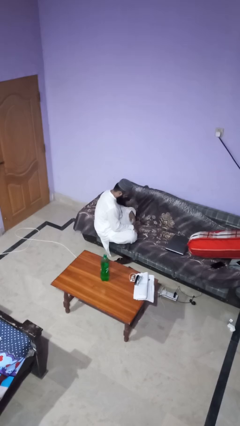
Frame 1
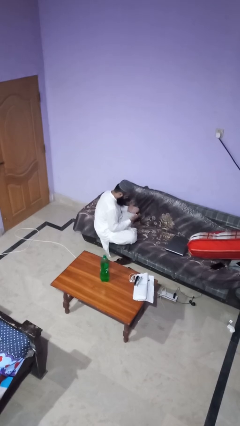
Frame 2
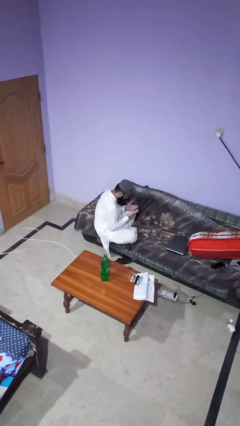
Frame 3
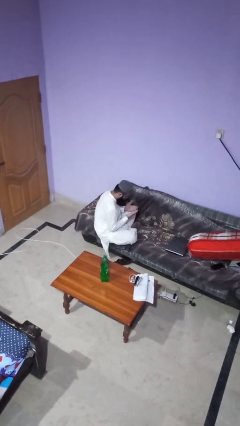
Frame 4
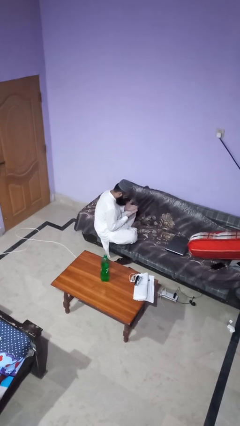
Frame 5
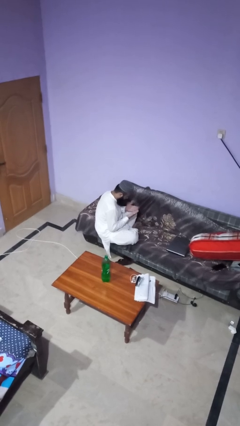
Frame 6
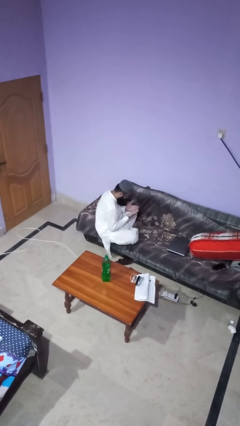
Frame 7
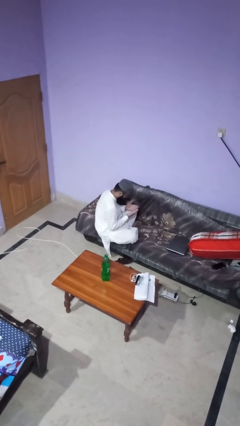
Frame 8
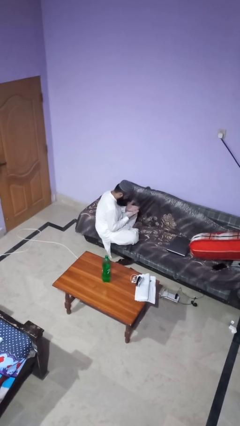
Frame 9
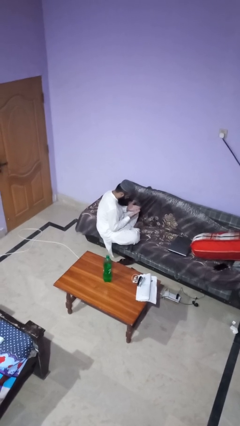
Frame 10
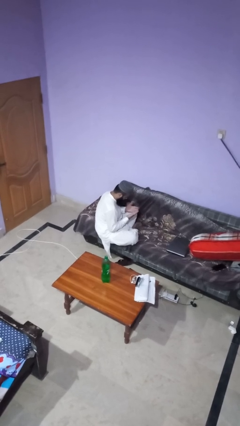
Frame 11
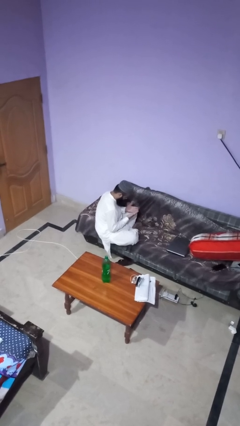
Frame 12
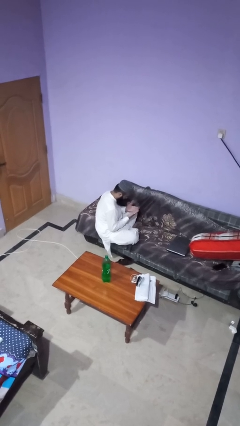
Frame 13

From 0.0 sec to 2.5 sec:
person looks at hands in lap

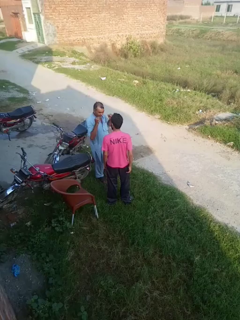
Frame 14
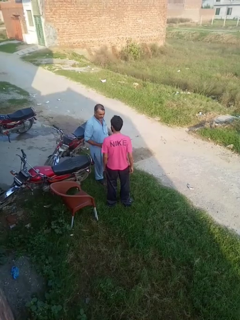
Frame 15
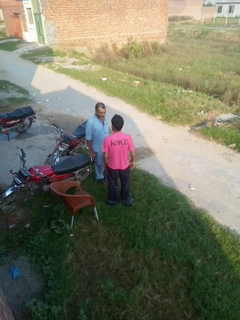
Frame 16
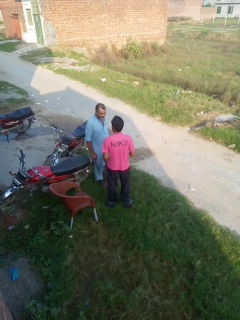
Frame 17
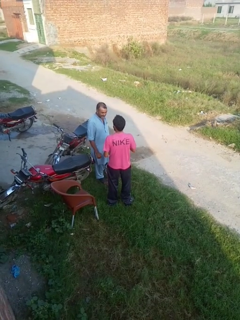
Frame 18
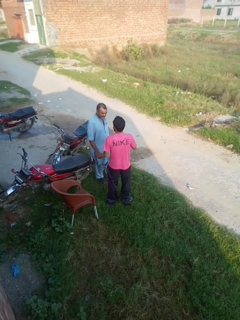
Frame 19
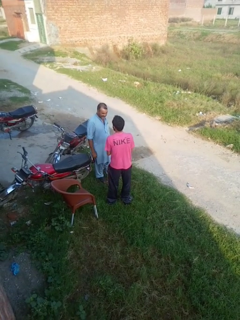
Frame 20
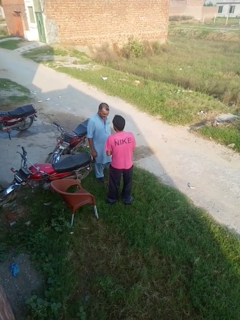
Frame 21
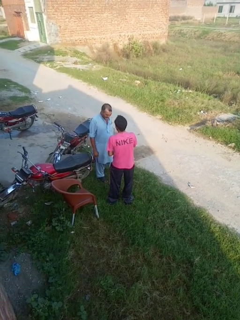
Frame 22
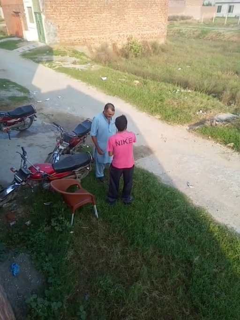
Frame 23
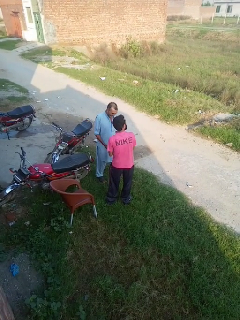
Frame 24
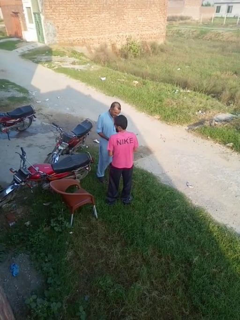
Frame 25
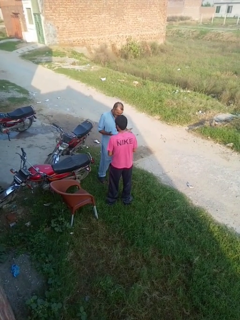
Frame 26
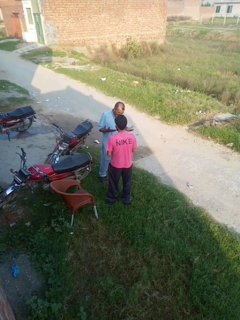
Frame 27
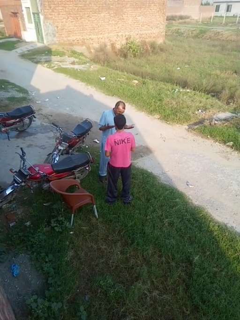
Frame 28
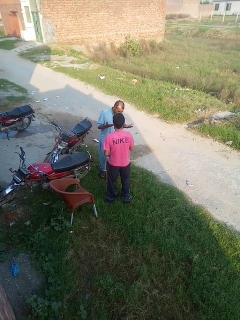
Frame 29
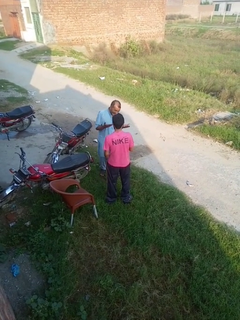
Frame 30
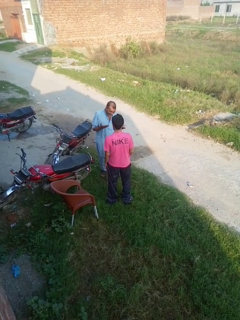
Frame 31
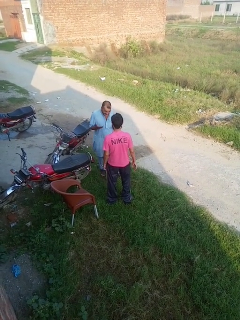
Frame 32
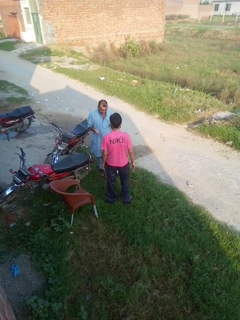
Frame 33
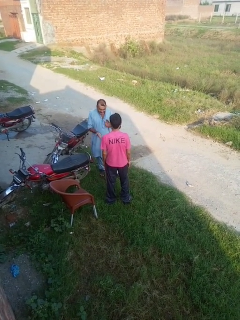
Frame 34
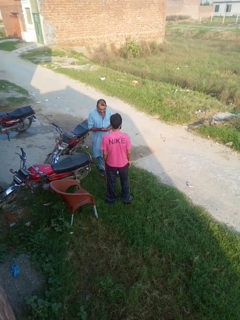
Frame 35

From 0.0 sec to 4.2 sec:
person laughs with person

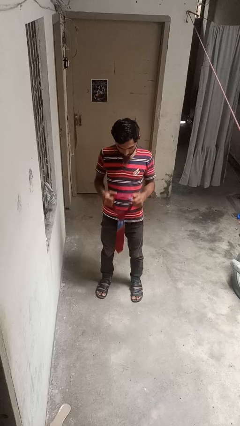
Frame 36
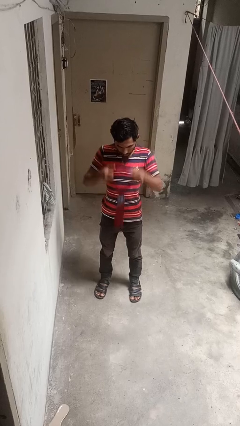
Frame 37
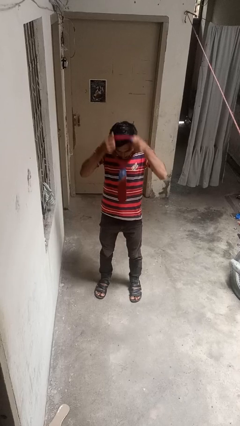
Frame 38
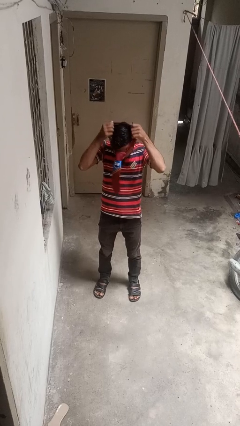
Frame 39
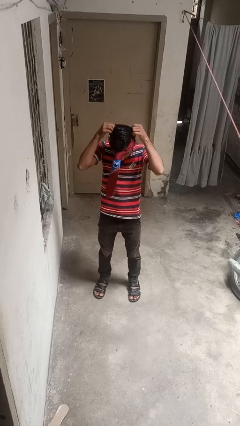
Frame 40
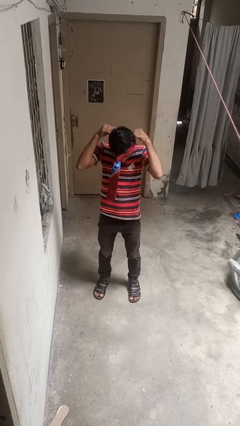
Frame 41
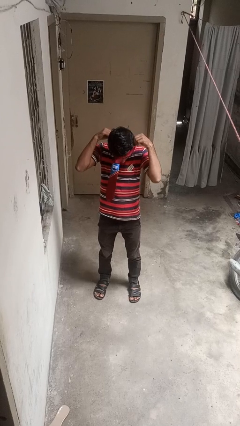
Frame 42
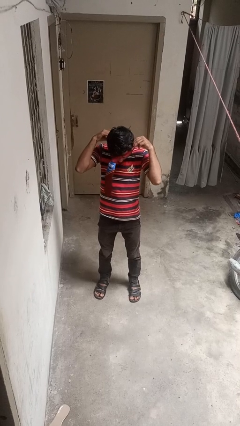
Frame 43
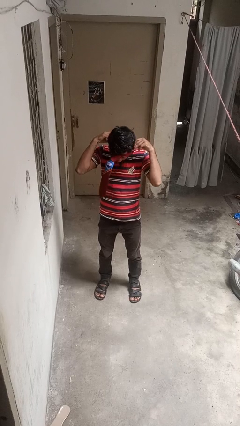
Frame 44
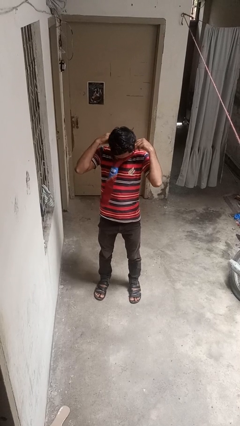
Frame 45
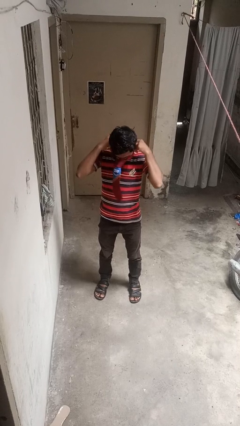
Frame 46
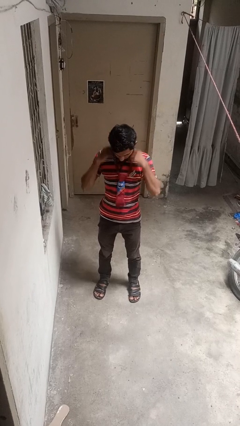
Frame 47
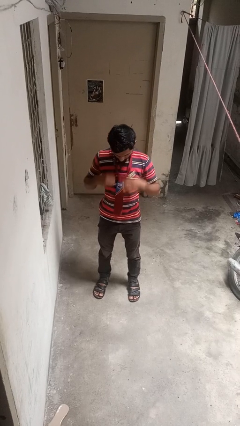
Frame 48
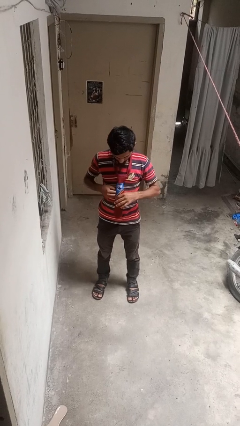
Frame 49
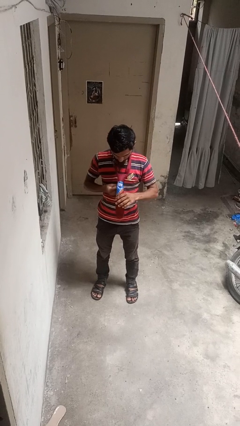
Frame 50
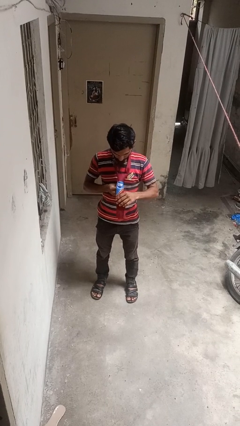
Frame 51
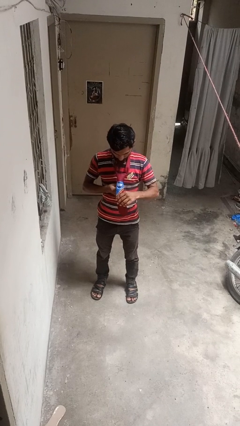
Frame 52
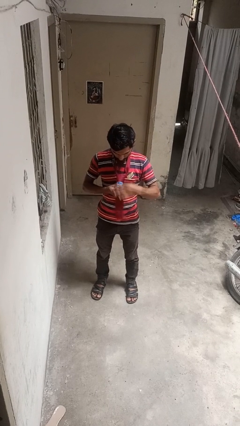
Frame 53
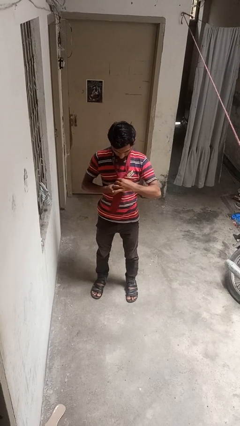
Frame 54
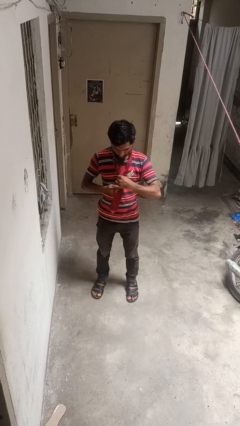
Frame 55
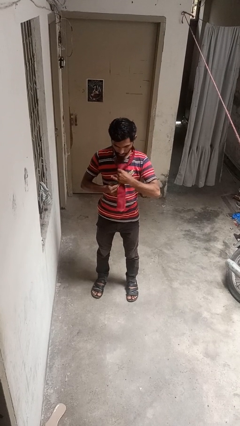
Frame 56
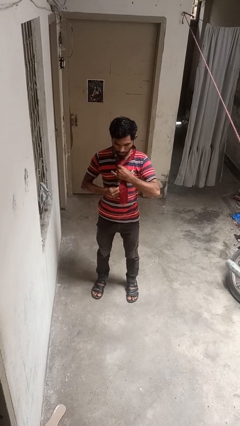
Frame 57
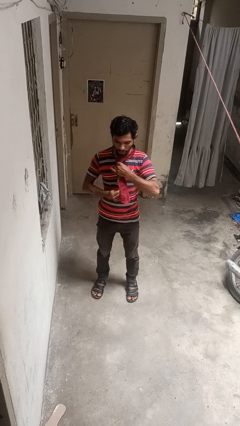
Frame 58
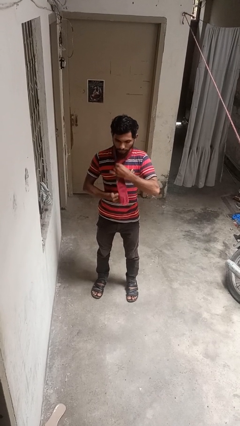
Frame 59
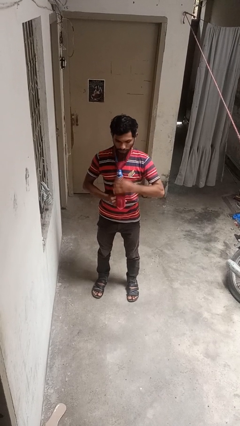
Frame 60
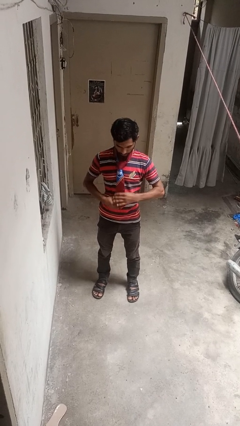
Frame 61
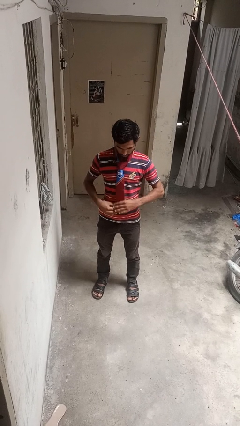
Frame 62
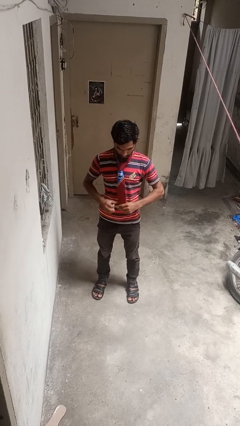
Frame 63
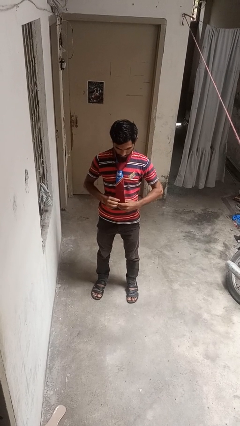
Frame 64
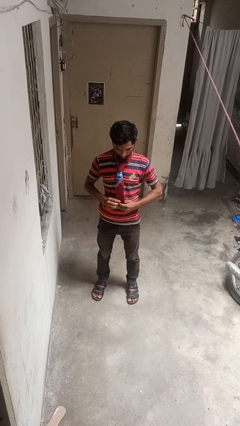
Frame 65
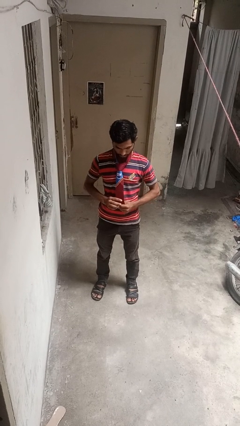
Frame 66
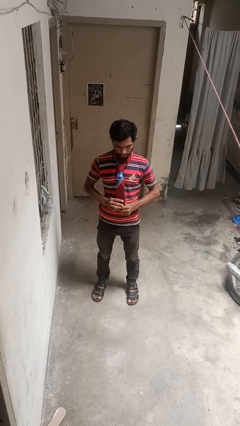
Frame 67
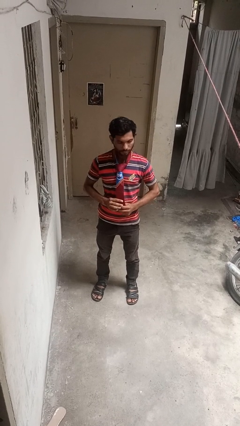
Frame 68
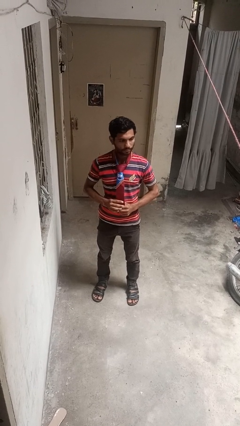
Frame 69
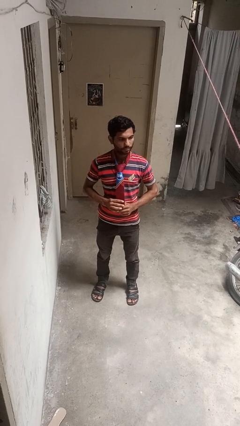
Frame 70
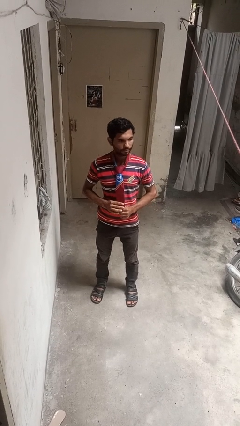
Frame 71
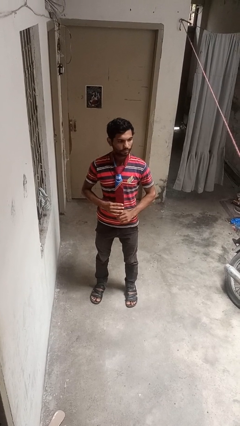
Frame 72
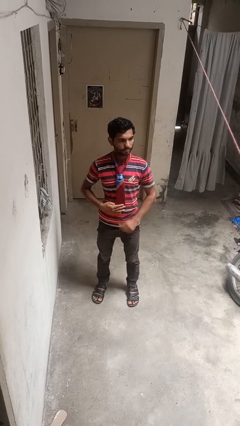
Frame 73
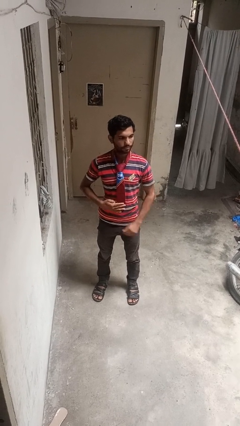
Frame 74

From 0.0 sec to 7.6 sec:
person puts on necktie

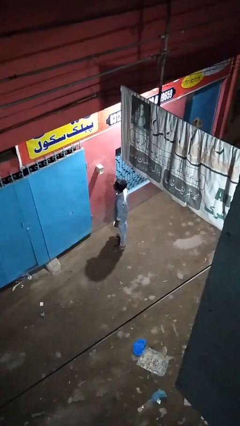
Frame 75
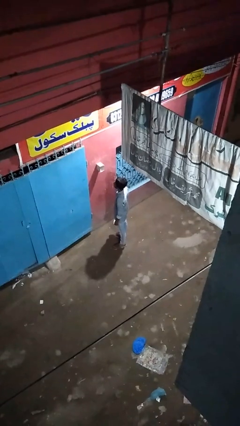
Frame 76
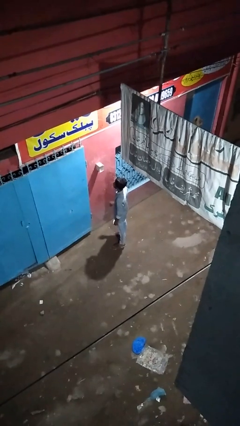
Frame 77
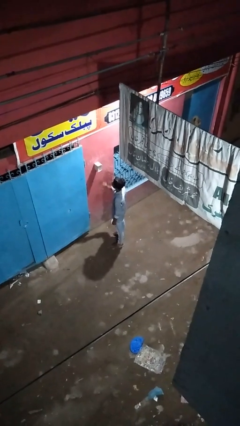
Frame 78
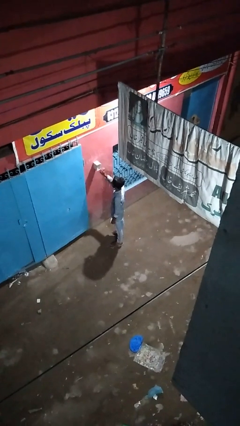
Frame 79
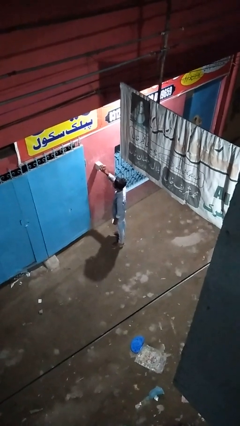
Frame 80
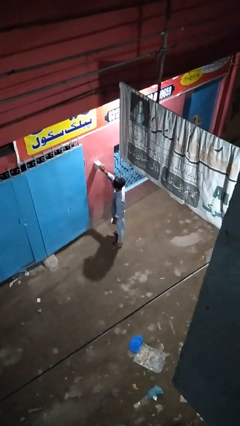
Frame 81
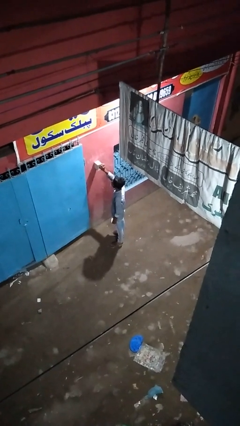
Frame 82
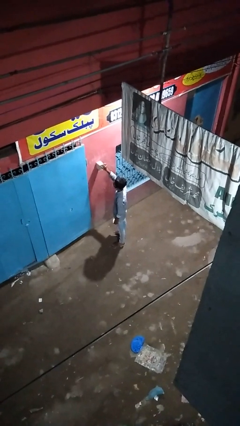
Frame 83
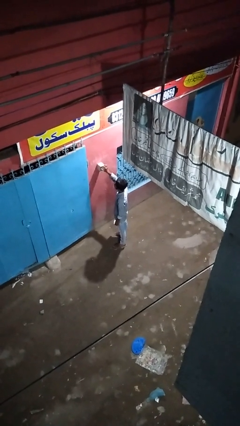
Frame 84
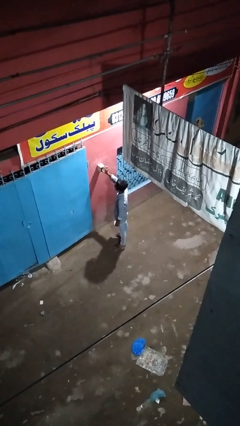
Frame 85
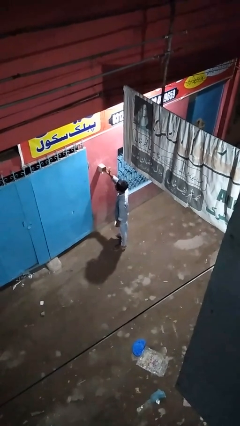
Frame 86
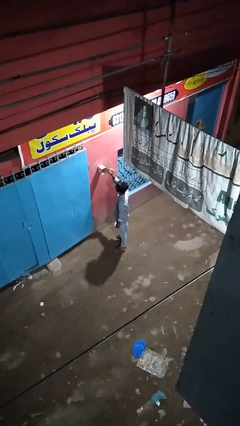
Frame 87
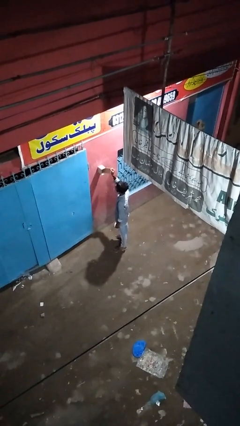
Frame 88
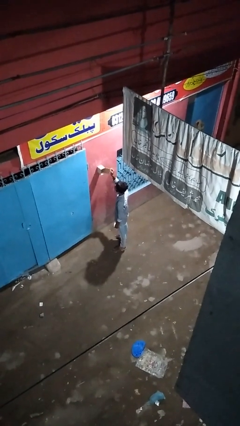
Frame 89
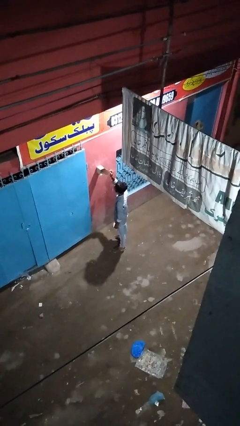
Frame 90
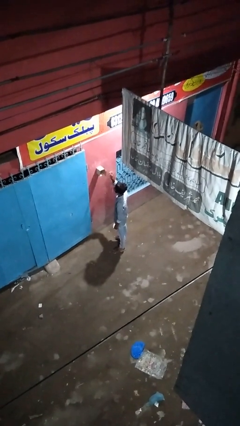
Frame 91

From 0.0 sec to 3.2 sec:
person opens mailbox

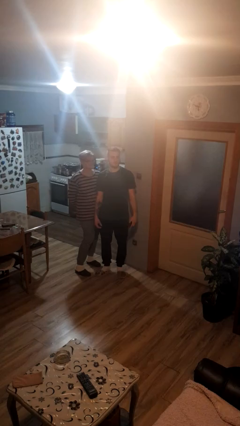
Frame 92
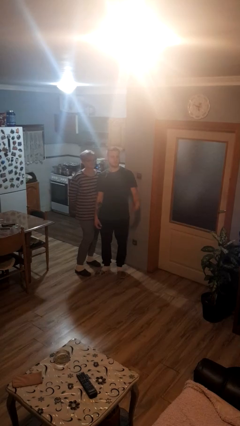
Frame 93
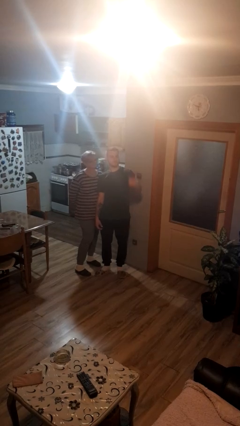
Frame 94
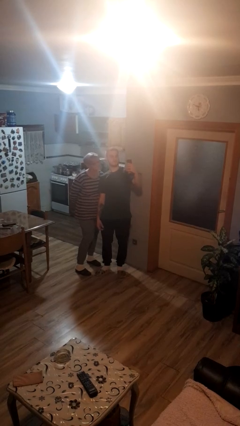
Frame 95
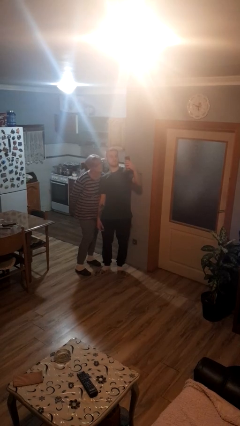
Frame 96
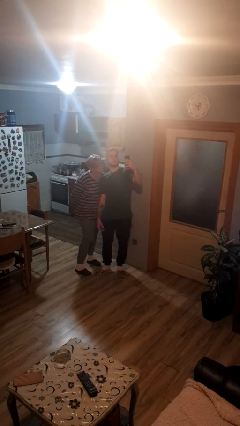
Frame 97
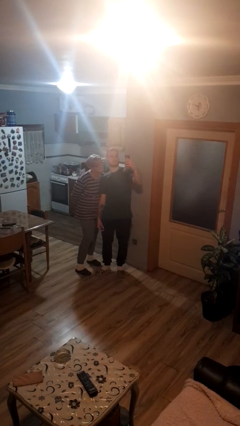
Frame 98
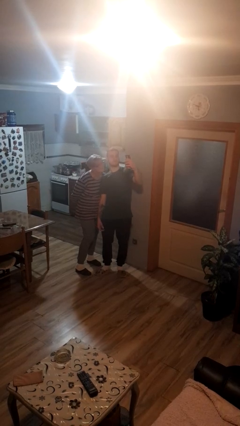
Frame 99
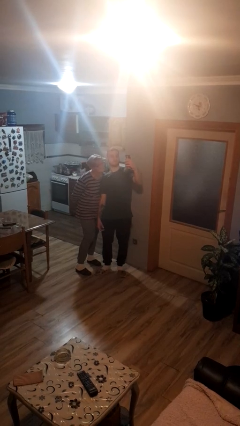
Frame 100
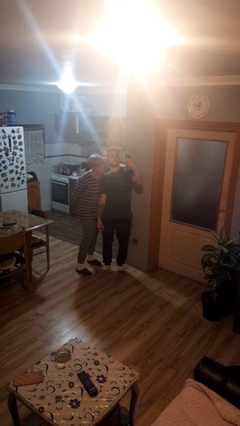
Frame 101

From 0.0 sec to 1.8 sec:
person takes selfie with person
